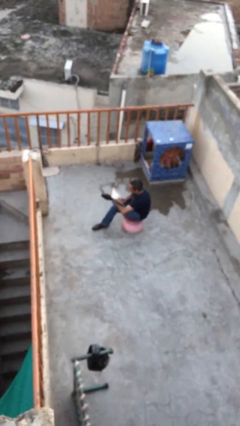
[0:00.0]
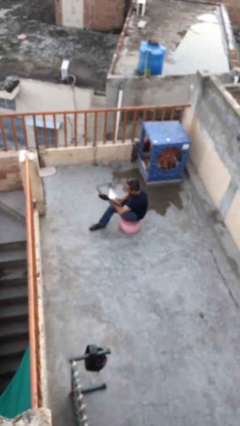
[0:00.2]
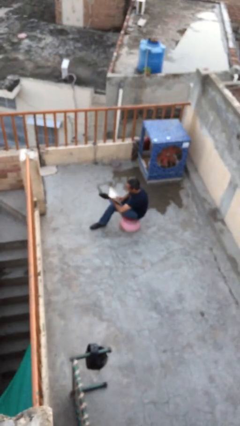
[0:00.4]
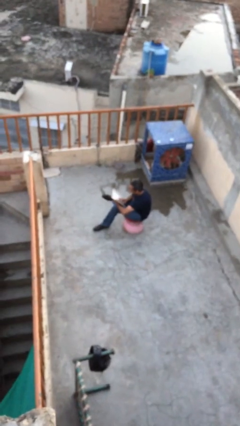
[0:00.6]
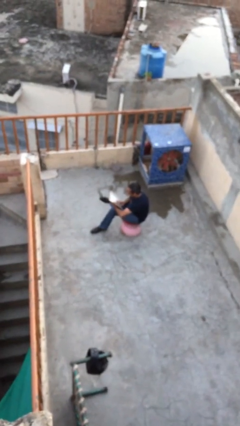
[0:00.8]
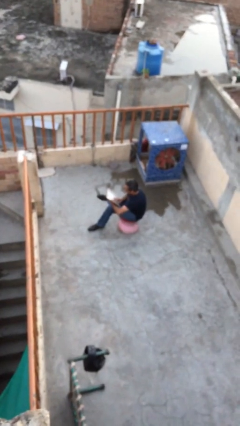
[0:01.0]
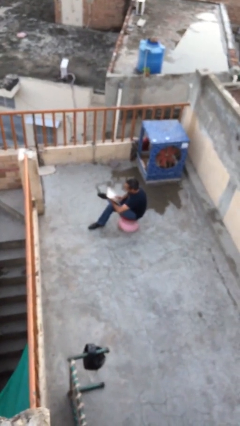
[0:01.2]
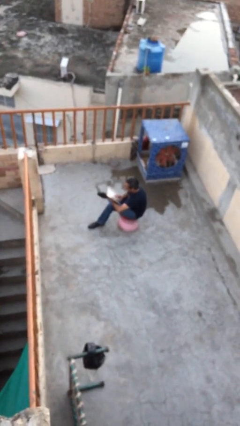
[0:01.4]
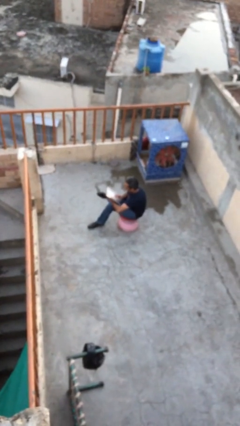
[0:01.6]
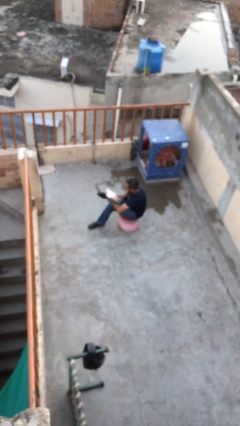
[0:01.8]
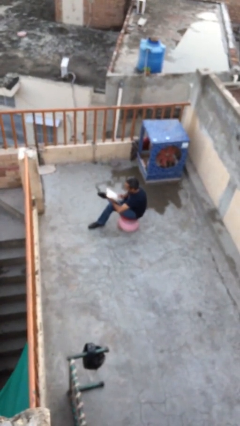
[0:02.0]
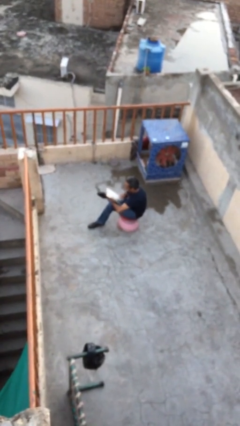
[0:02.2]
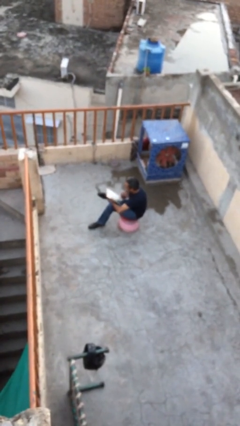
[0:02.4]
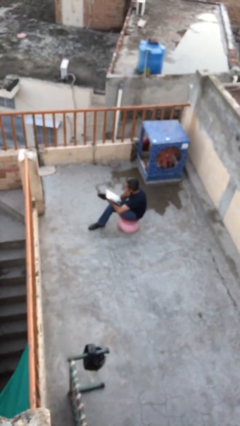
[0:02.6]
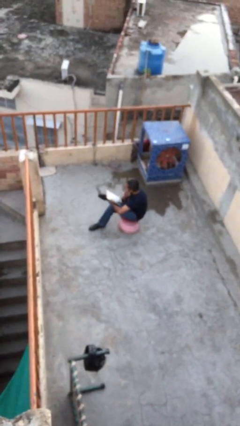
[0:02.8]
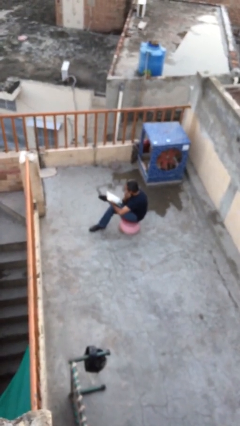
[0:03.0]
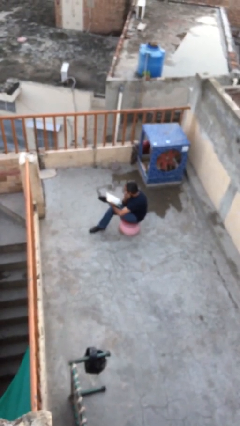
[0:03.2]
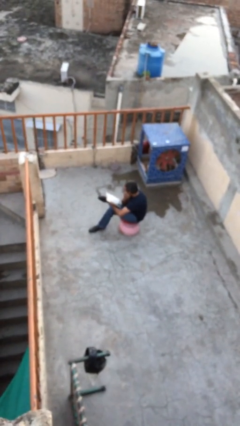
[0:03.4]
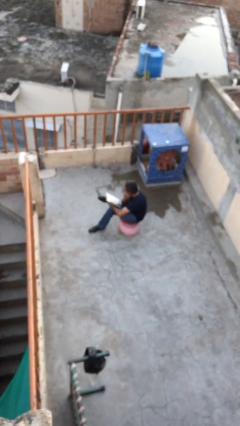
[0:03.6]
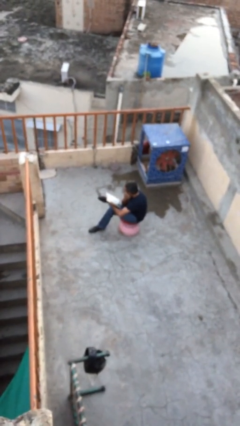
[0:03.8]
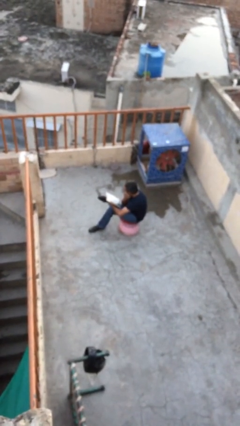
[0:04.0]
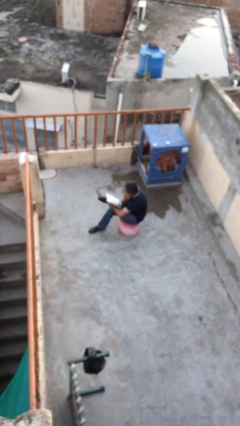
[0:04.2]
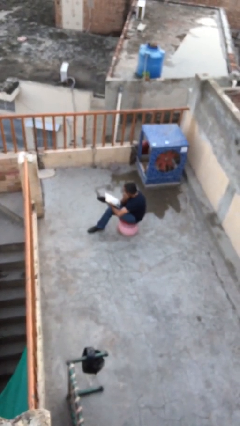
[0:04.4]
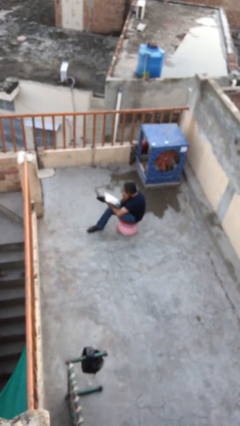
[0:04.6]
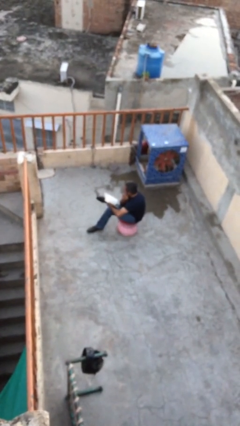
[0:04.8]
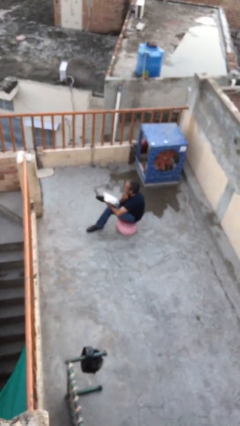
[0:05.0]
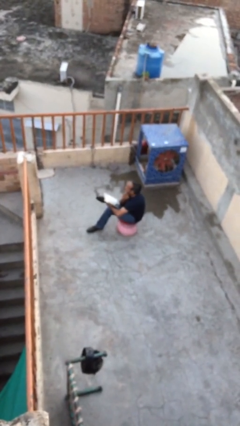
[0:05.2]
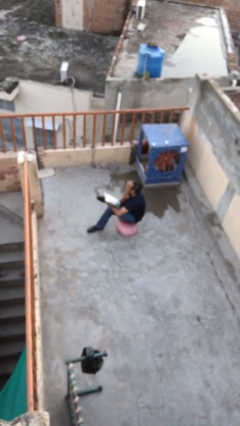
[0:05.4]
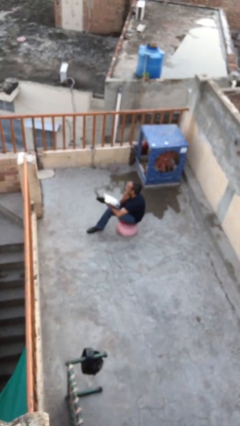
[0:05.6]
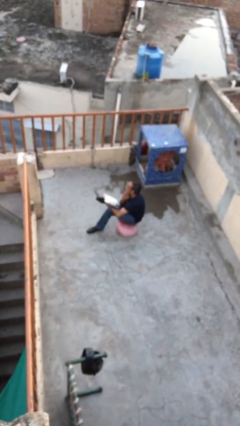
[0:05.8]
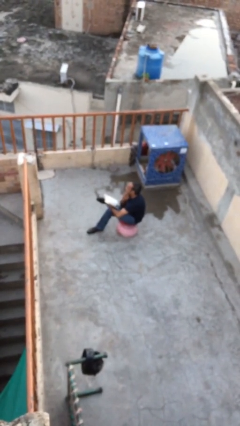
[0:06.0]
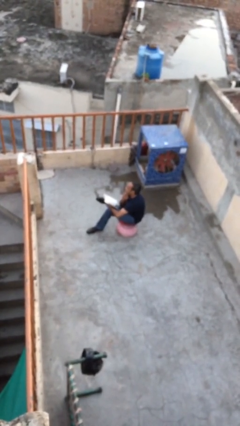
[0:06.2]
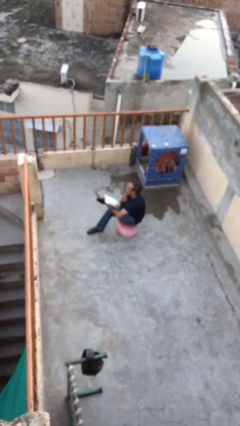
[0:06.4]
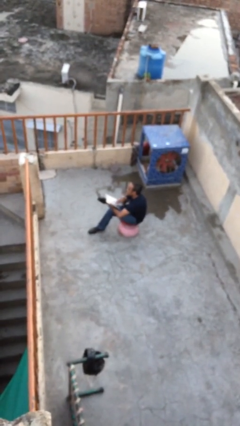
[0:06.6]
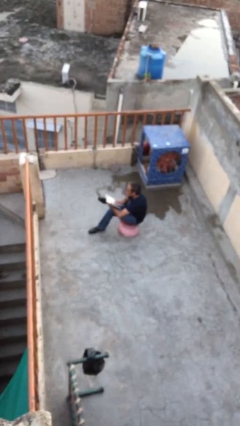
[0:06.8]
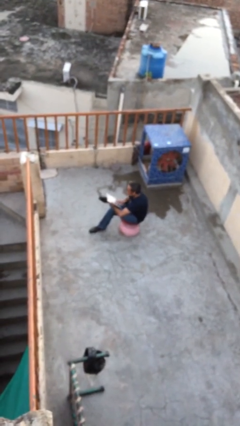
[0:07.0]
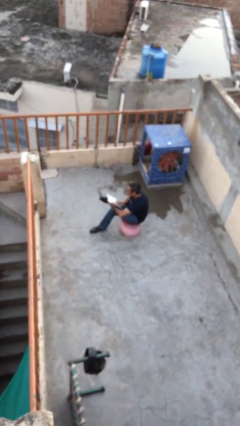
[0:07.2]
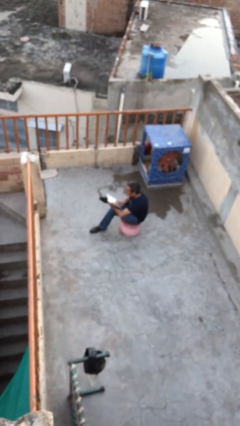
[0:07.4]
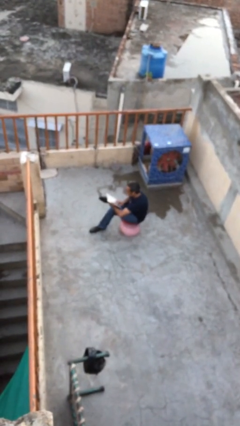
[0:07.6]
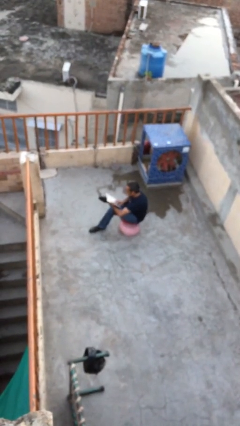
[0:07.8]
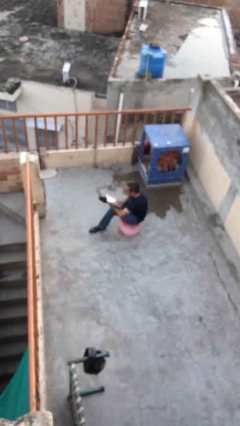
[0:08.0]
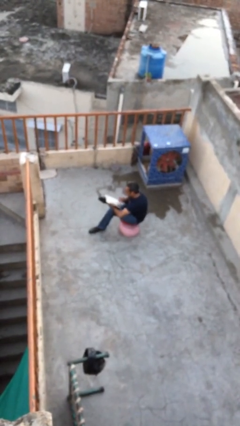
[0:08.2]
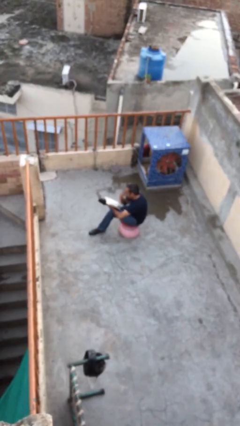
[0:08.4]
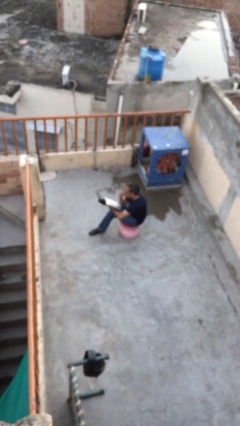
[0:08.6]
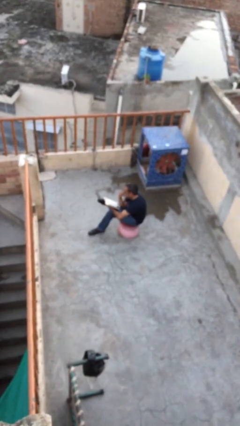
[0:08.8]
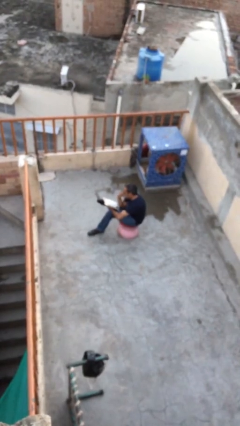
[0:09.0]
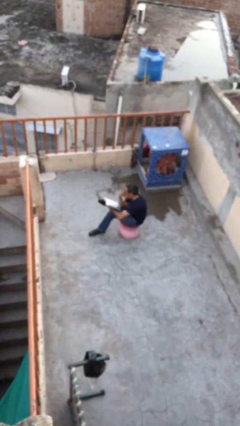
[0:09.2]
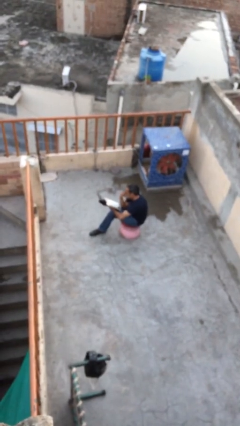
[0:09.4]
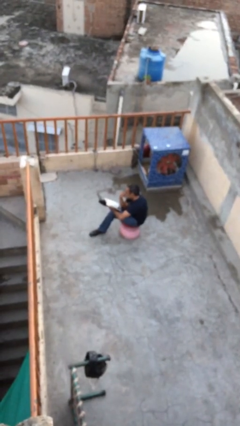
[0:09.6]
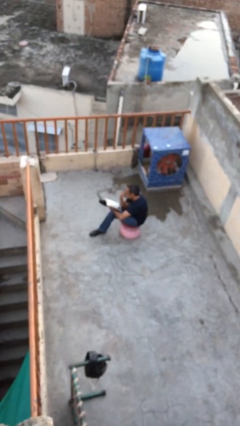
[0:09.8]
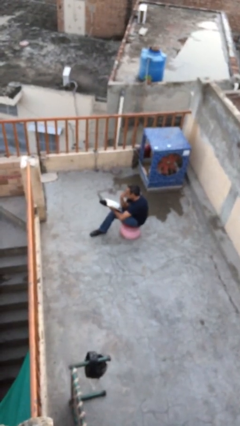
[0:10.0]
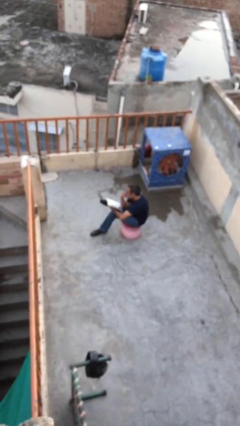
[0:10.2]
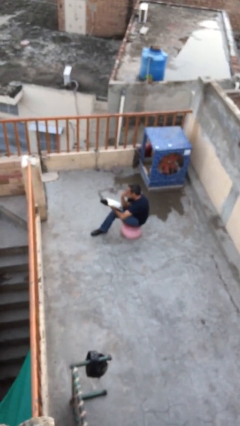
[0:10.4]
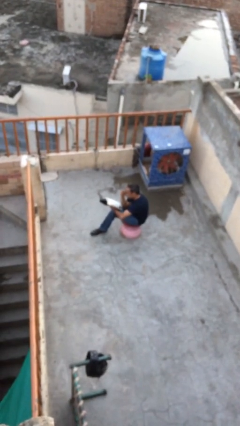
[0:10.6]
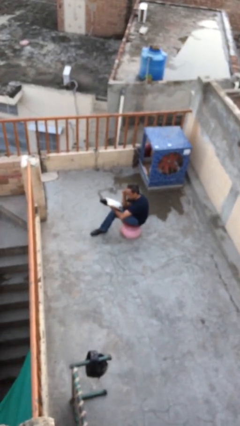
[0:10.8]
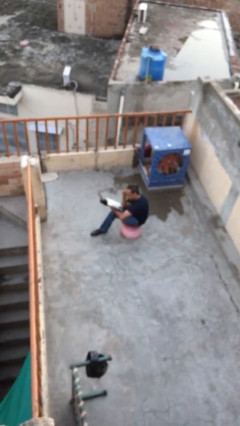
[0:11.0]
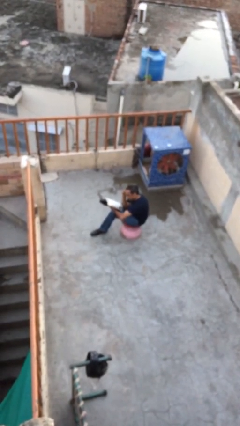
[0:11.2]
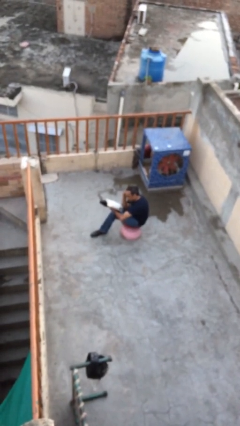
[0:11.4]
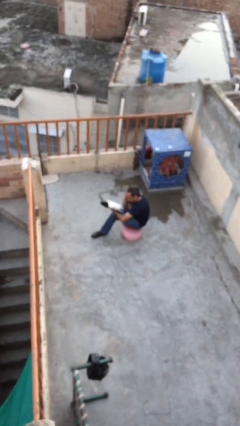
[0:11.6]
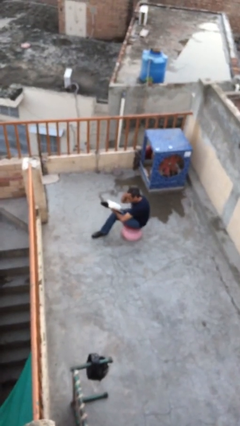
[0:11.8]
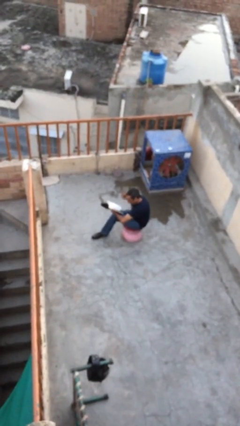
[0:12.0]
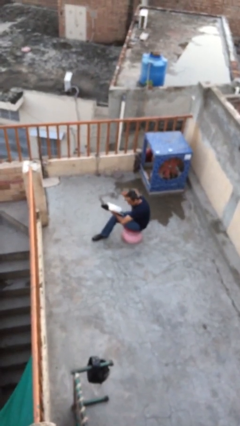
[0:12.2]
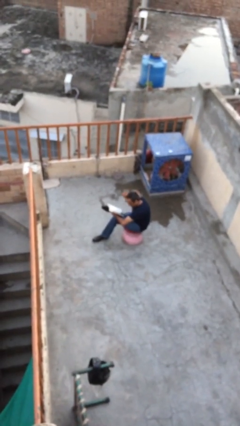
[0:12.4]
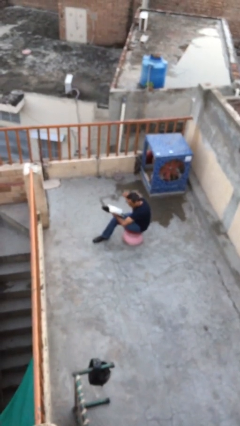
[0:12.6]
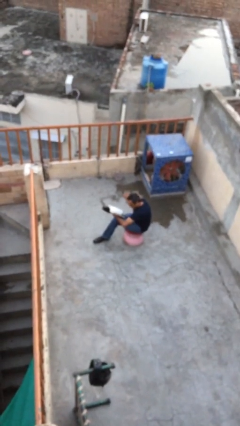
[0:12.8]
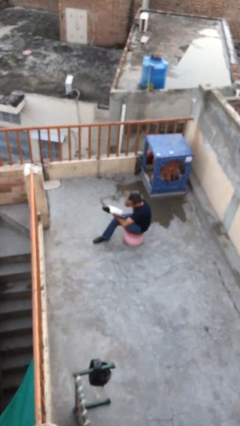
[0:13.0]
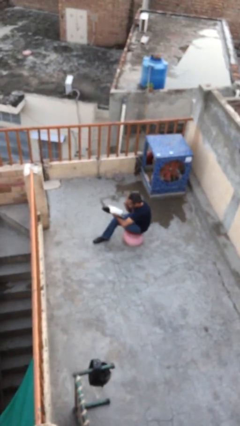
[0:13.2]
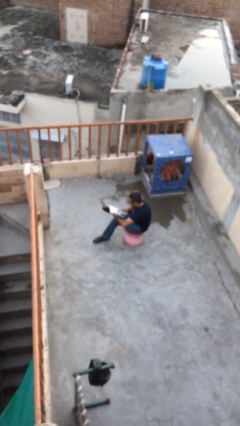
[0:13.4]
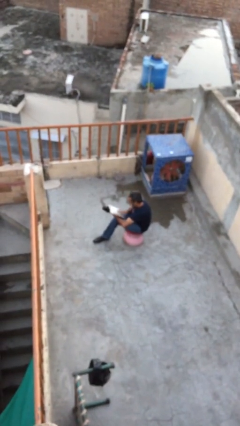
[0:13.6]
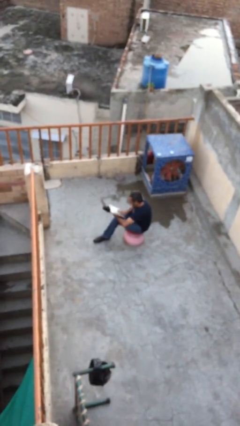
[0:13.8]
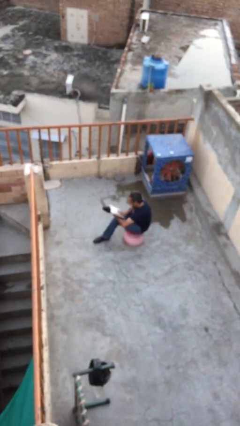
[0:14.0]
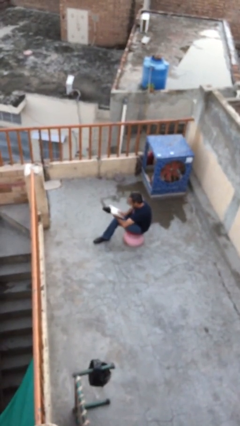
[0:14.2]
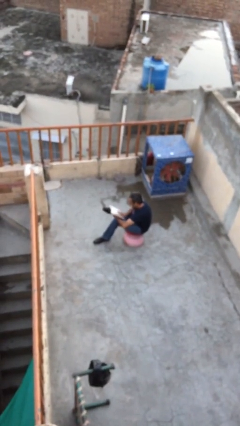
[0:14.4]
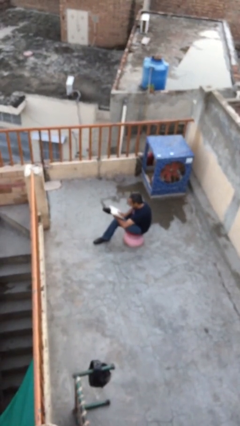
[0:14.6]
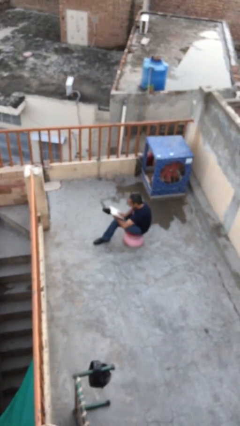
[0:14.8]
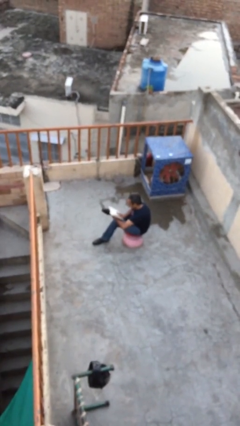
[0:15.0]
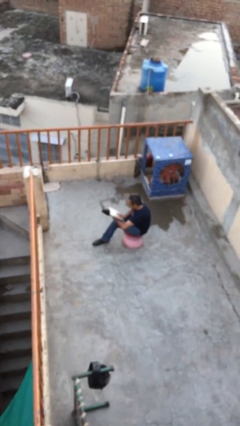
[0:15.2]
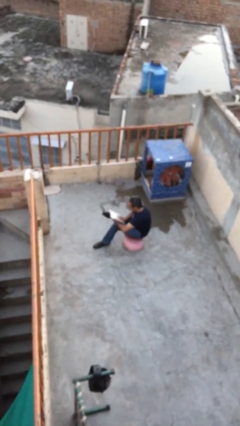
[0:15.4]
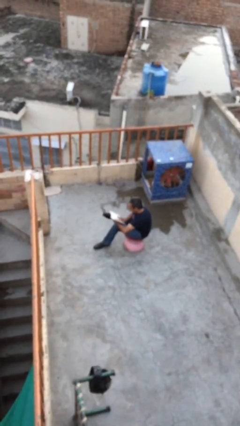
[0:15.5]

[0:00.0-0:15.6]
person reads document

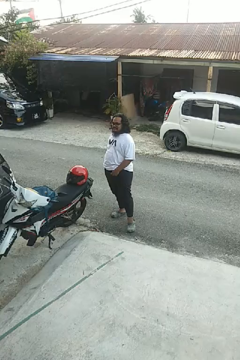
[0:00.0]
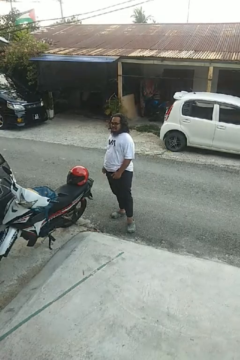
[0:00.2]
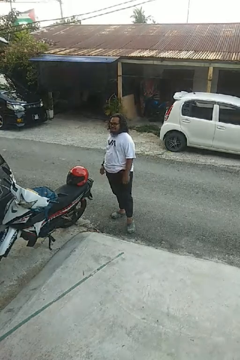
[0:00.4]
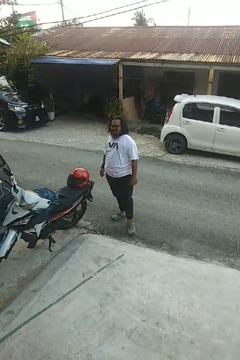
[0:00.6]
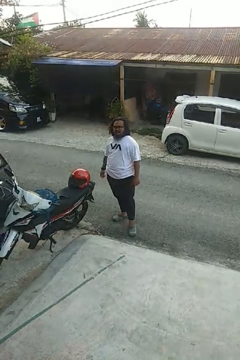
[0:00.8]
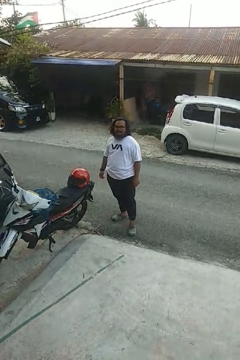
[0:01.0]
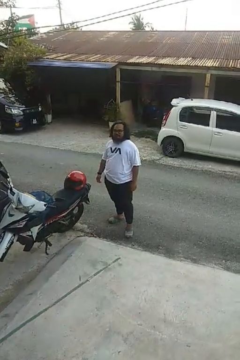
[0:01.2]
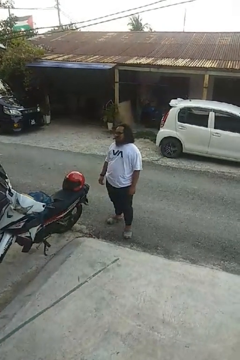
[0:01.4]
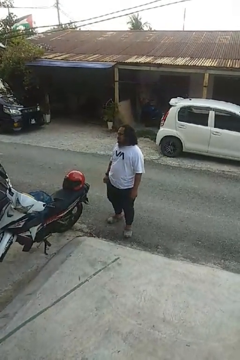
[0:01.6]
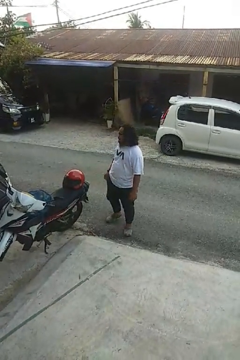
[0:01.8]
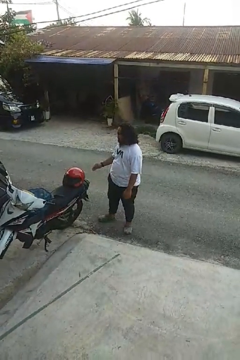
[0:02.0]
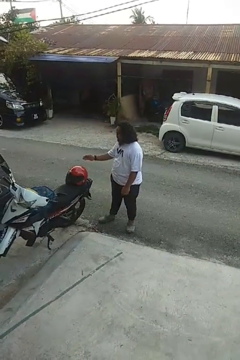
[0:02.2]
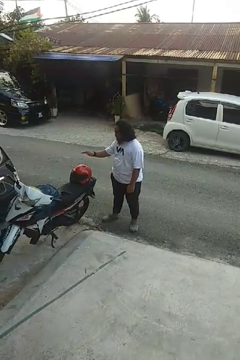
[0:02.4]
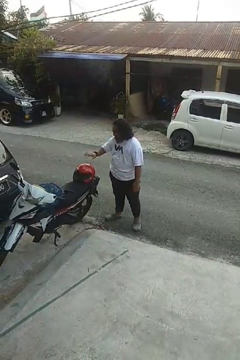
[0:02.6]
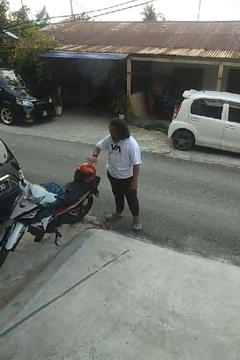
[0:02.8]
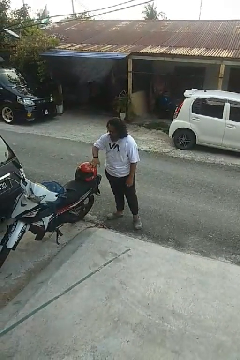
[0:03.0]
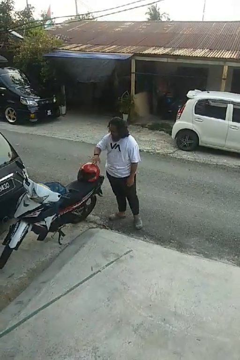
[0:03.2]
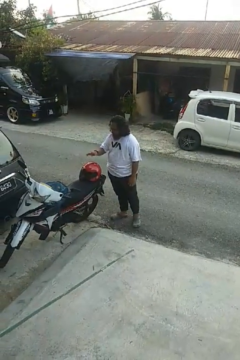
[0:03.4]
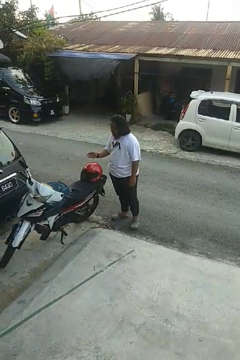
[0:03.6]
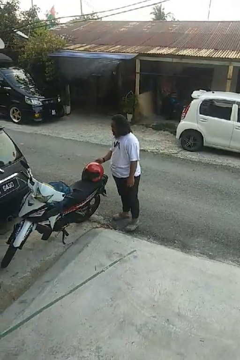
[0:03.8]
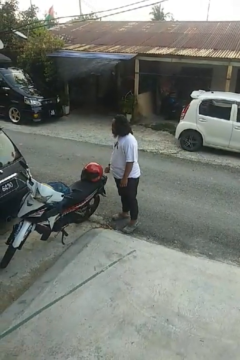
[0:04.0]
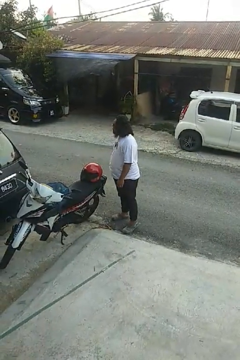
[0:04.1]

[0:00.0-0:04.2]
person waves hand over object
